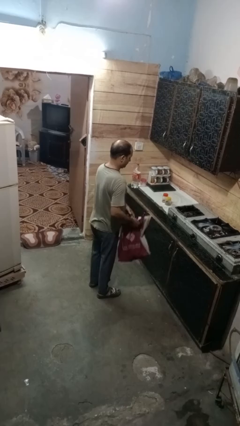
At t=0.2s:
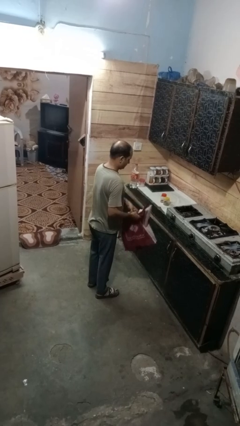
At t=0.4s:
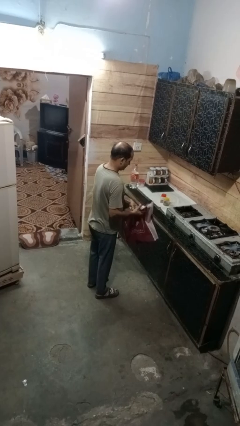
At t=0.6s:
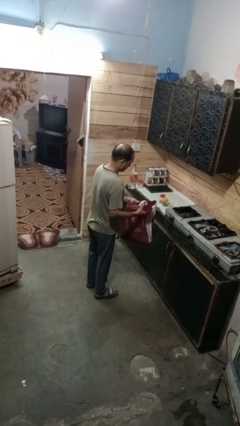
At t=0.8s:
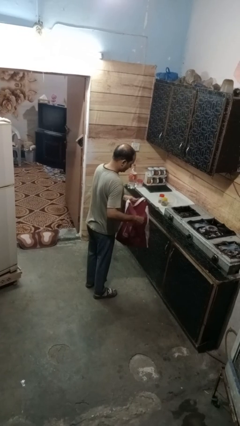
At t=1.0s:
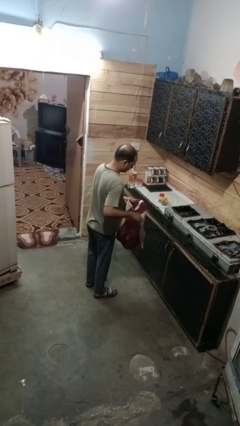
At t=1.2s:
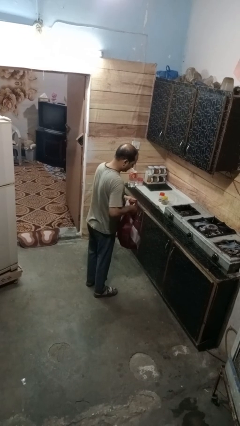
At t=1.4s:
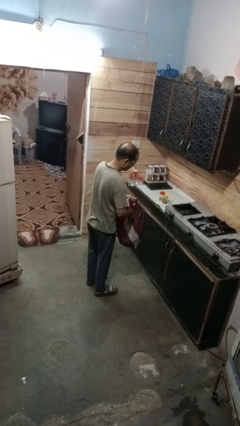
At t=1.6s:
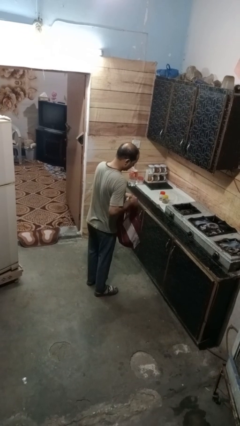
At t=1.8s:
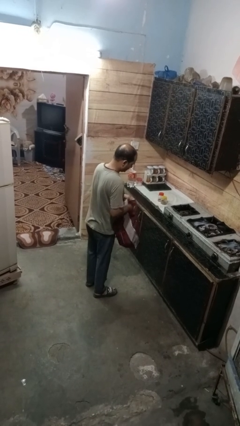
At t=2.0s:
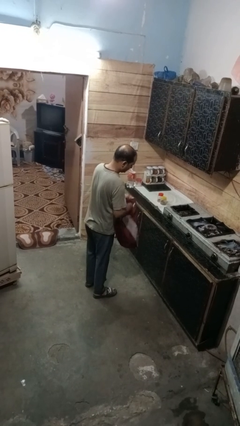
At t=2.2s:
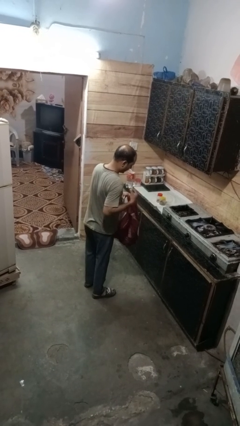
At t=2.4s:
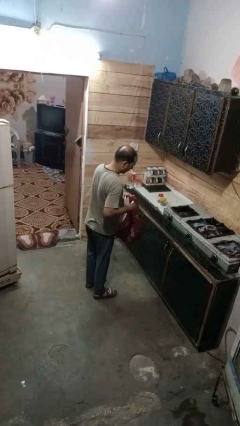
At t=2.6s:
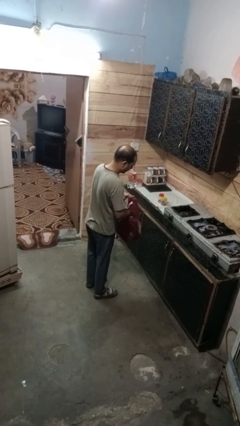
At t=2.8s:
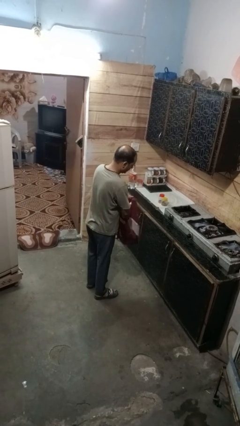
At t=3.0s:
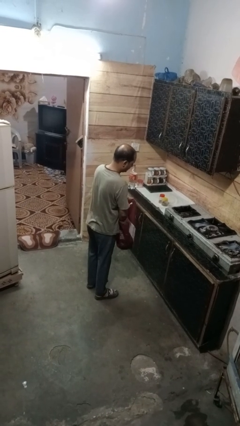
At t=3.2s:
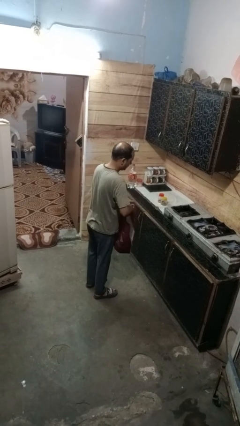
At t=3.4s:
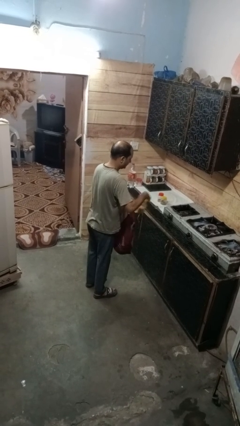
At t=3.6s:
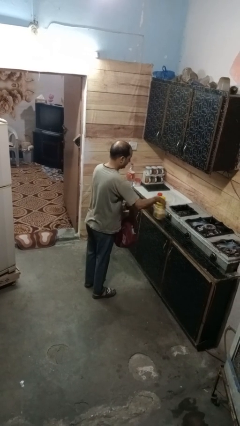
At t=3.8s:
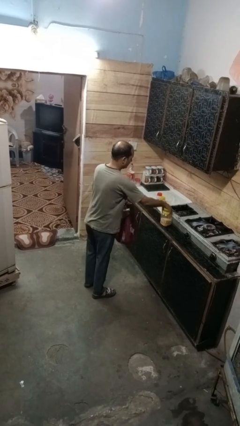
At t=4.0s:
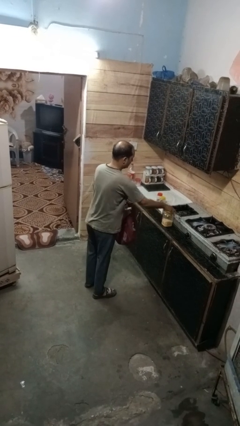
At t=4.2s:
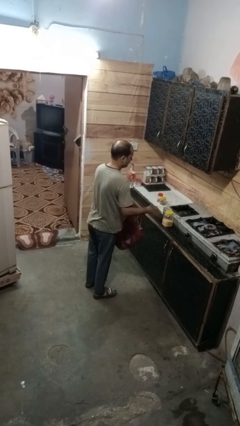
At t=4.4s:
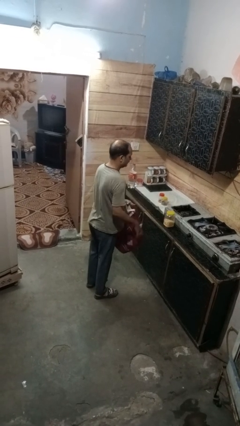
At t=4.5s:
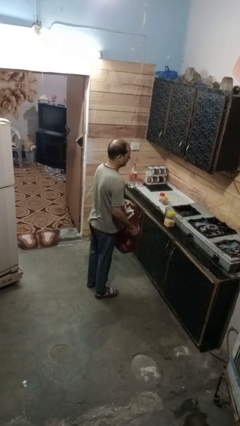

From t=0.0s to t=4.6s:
person takes object from bag

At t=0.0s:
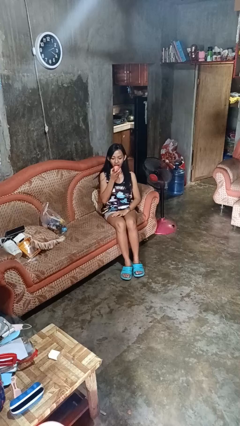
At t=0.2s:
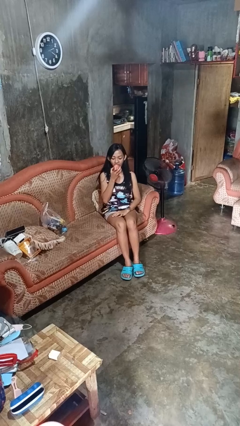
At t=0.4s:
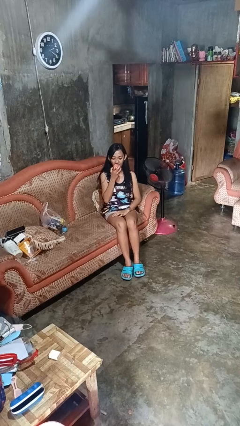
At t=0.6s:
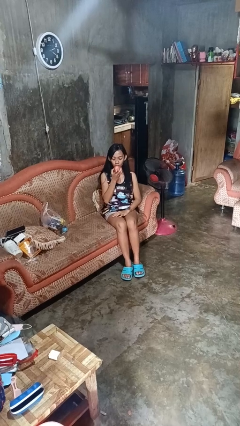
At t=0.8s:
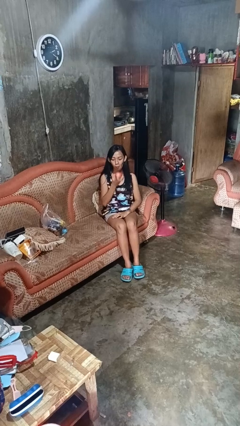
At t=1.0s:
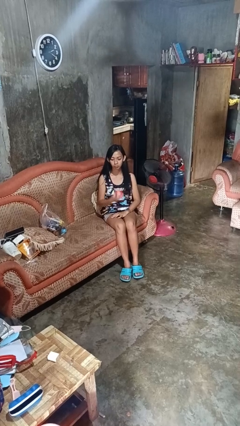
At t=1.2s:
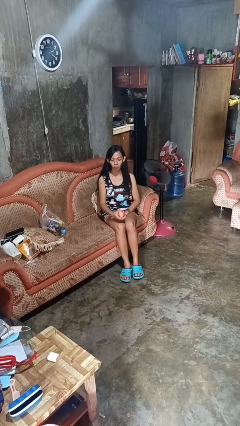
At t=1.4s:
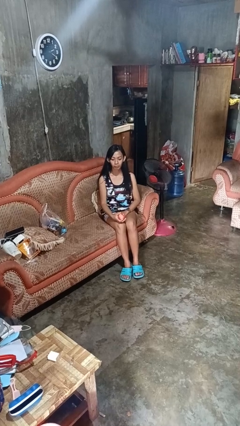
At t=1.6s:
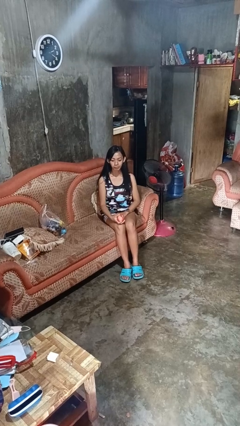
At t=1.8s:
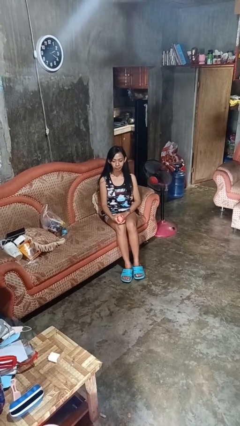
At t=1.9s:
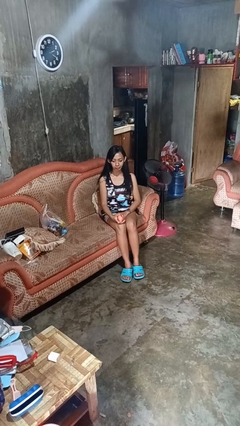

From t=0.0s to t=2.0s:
person eats apple

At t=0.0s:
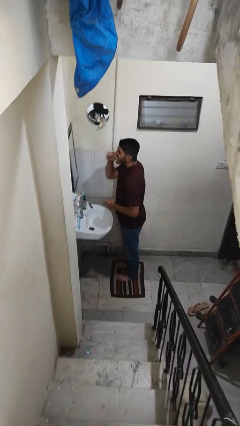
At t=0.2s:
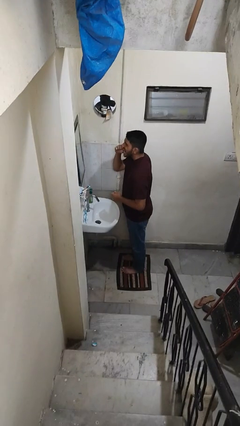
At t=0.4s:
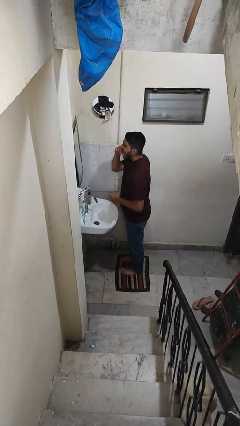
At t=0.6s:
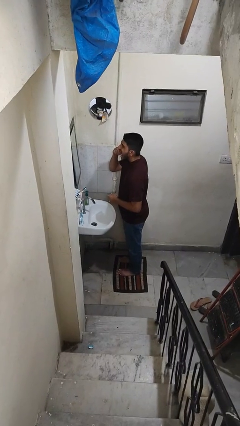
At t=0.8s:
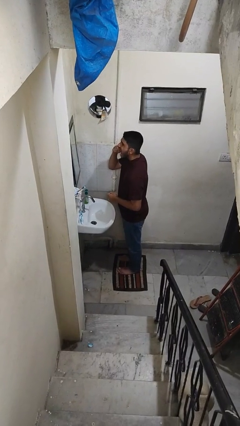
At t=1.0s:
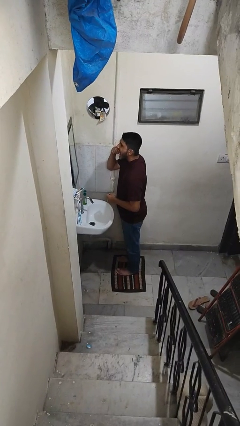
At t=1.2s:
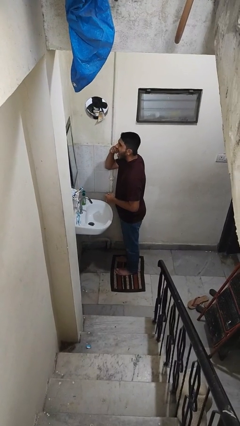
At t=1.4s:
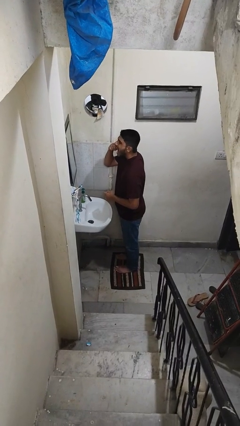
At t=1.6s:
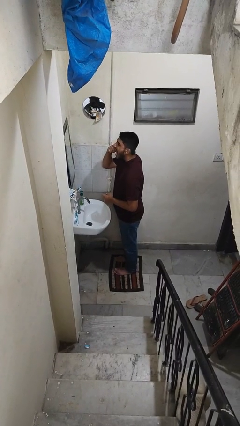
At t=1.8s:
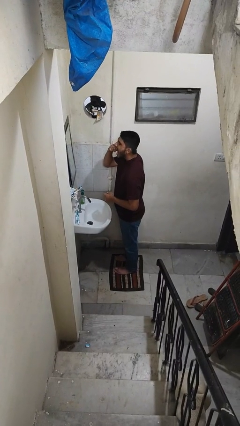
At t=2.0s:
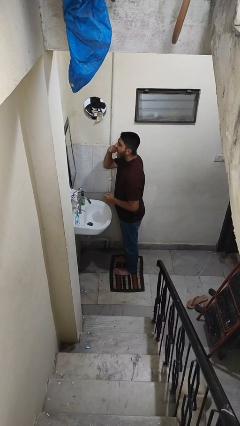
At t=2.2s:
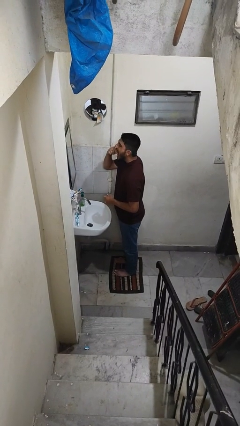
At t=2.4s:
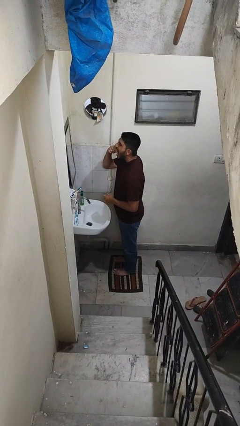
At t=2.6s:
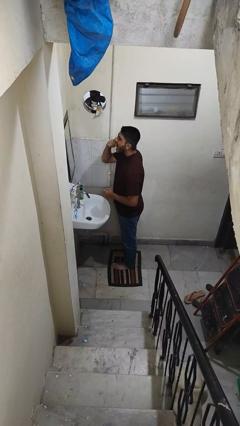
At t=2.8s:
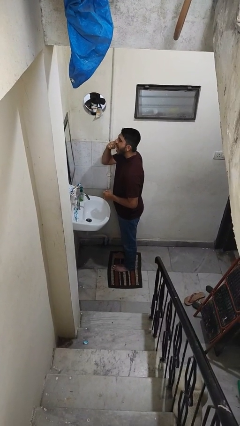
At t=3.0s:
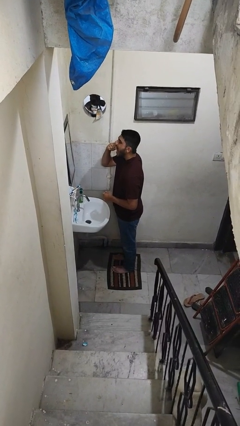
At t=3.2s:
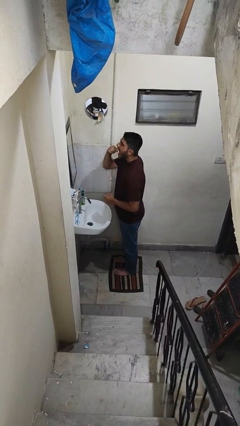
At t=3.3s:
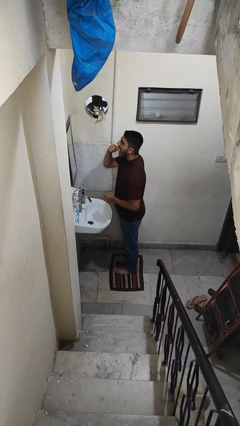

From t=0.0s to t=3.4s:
person flosses

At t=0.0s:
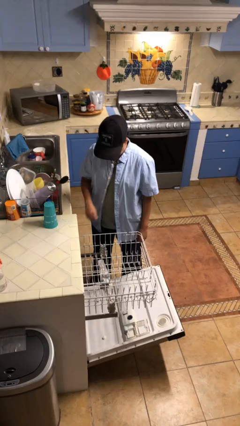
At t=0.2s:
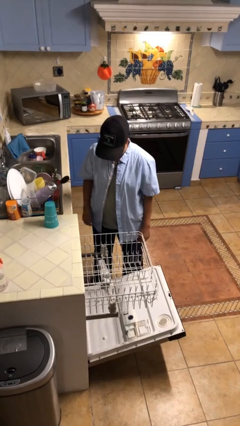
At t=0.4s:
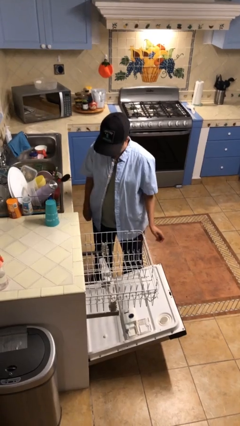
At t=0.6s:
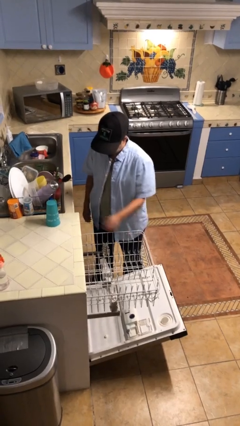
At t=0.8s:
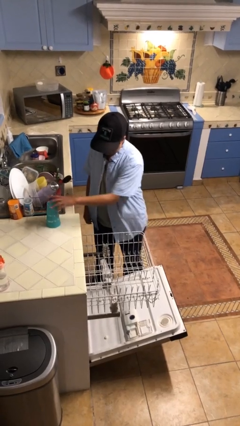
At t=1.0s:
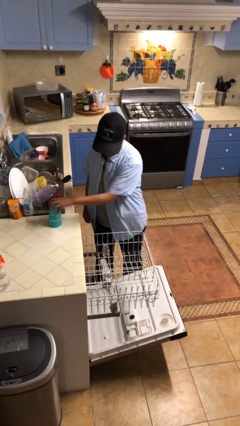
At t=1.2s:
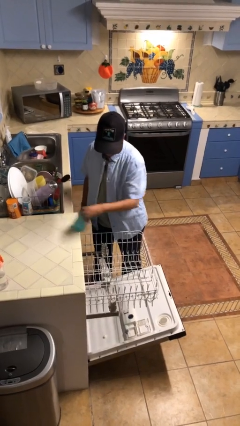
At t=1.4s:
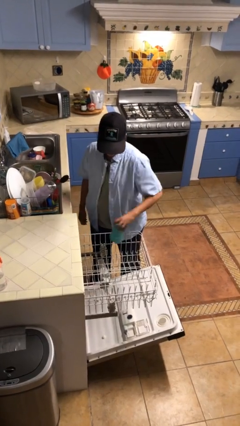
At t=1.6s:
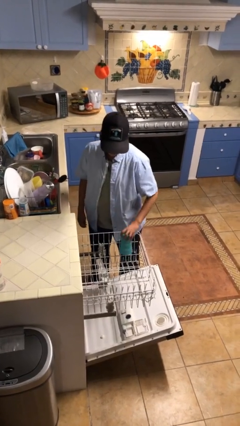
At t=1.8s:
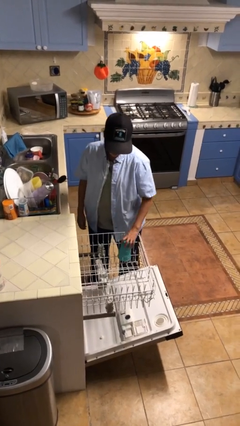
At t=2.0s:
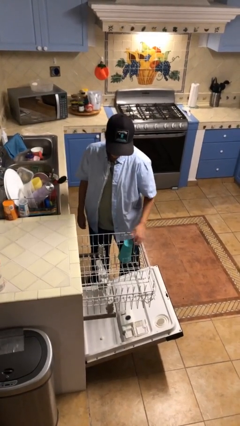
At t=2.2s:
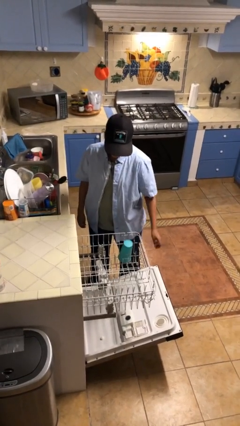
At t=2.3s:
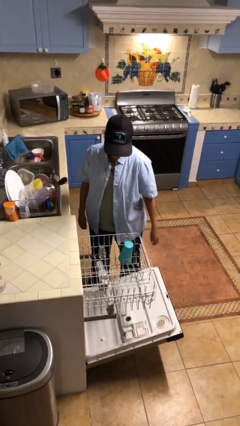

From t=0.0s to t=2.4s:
person loads dishwasher

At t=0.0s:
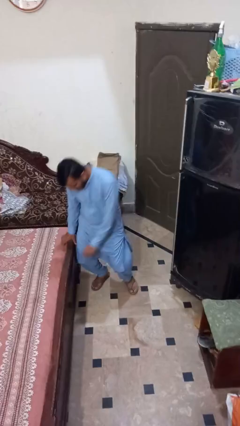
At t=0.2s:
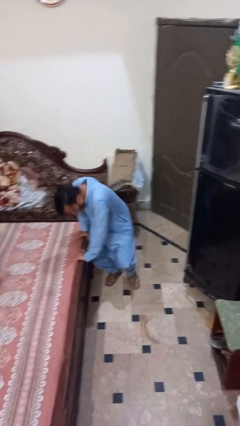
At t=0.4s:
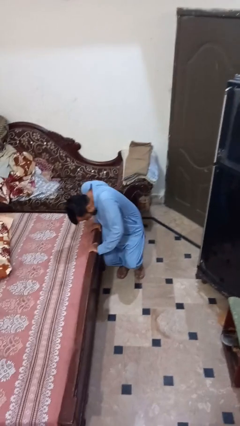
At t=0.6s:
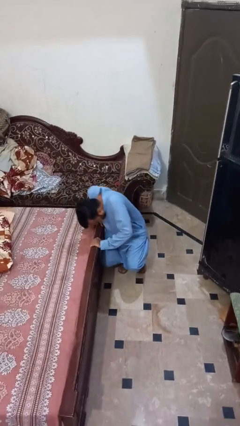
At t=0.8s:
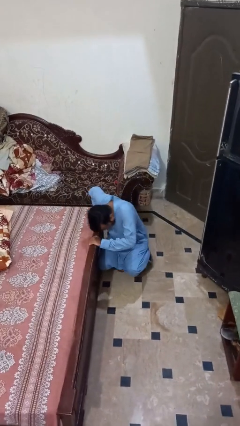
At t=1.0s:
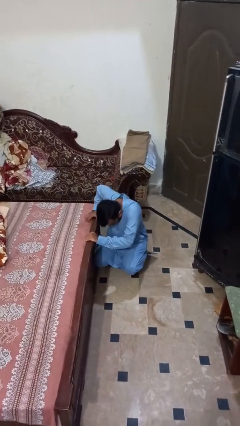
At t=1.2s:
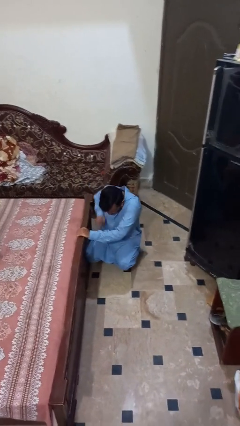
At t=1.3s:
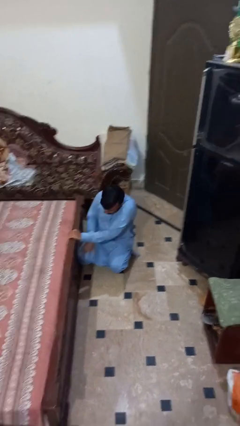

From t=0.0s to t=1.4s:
person trips on object on floor

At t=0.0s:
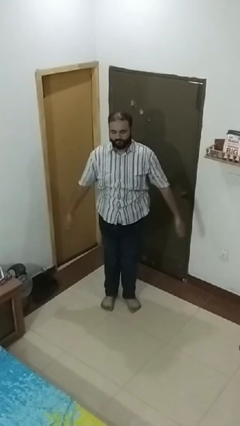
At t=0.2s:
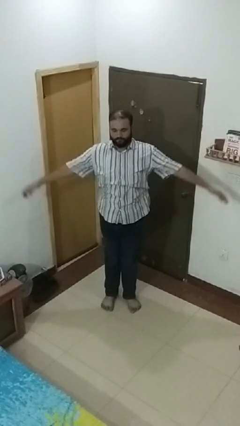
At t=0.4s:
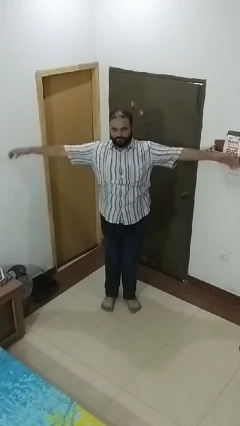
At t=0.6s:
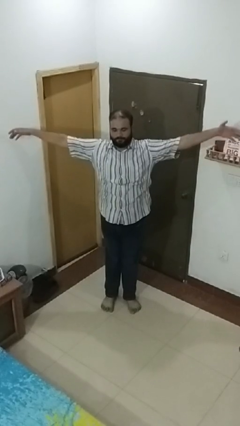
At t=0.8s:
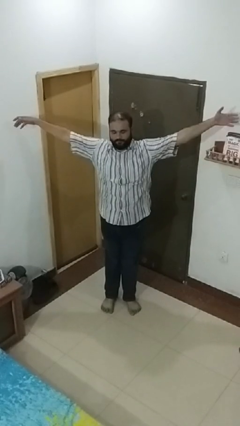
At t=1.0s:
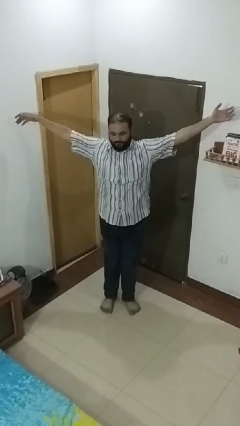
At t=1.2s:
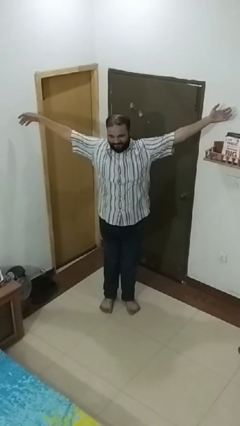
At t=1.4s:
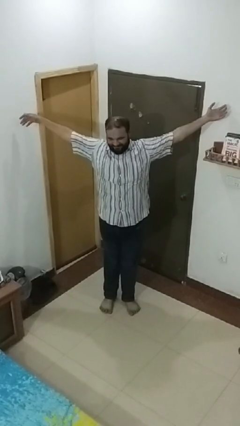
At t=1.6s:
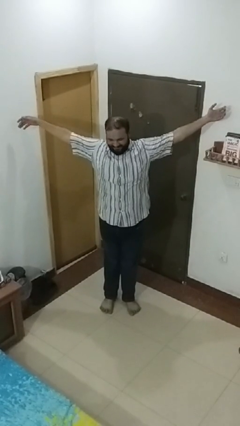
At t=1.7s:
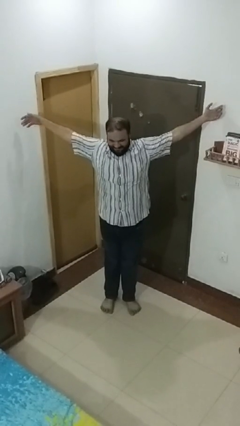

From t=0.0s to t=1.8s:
person stretches arms to side

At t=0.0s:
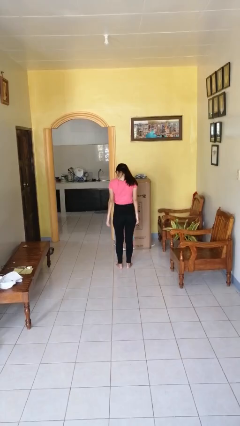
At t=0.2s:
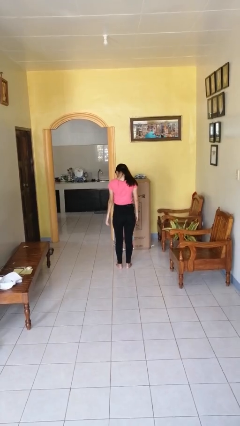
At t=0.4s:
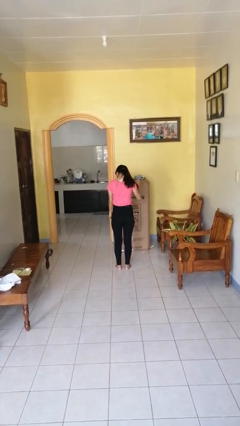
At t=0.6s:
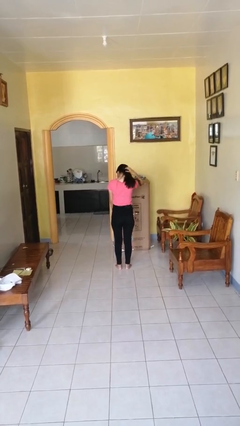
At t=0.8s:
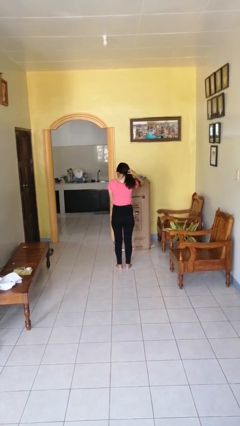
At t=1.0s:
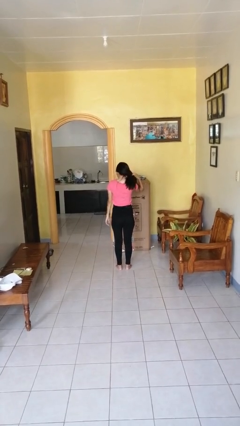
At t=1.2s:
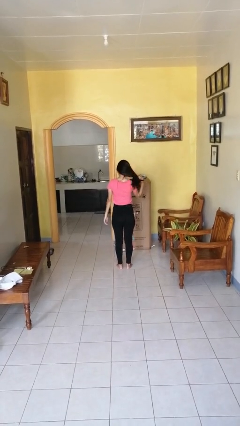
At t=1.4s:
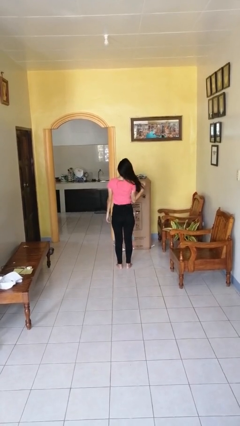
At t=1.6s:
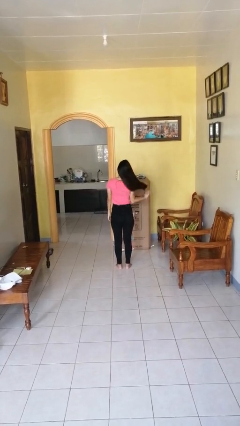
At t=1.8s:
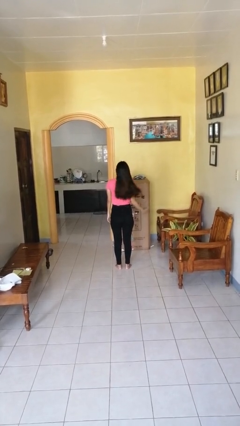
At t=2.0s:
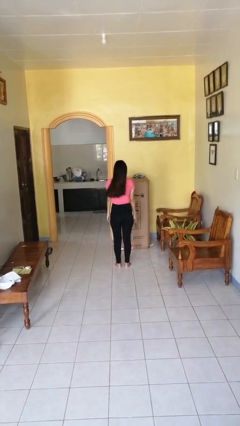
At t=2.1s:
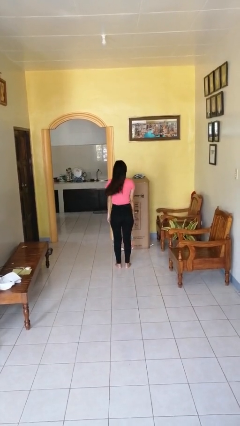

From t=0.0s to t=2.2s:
person takes off hairtie
